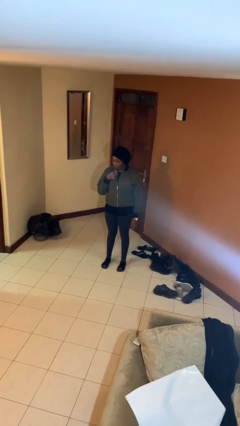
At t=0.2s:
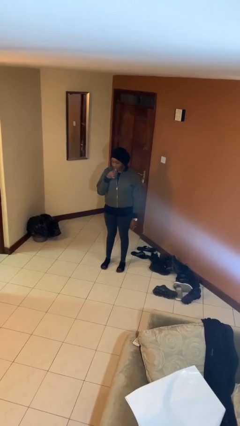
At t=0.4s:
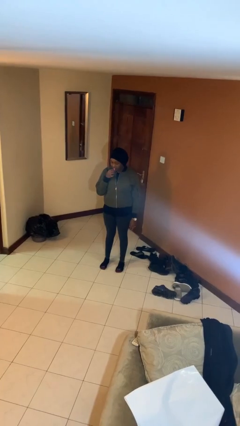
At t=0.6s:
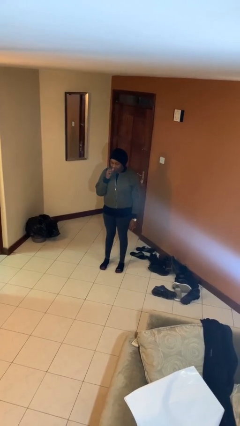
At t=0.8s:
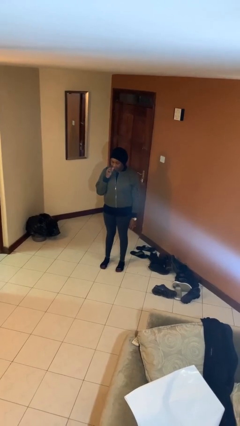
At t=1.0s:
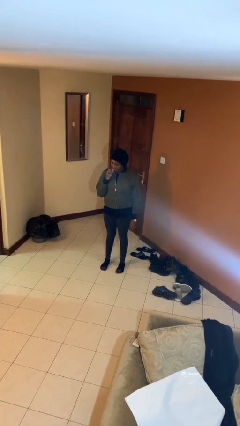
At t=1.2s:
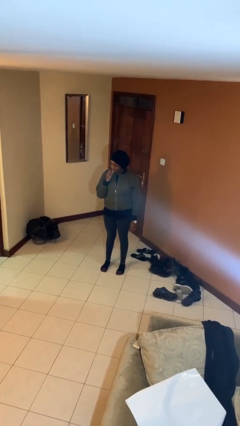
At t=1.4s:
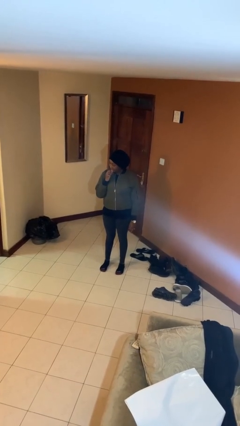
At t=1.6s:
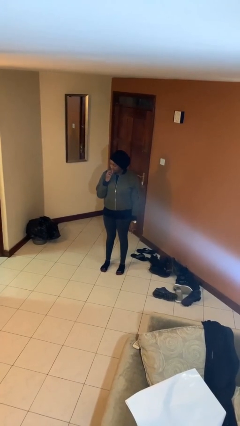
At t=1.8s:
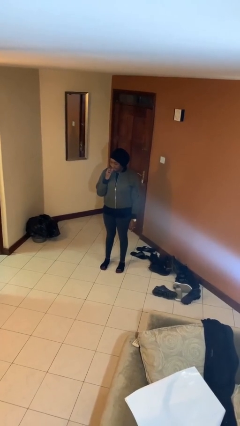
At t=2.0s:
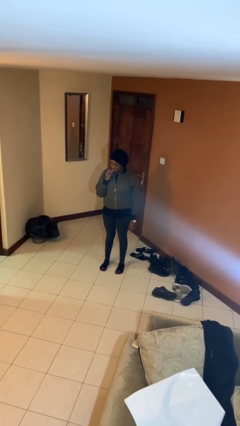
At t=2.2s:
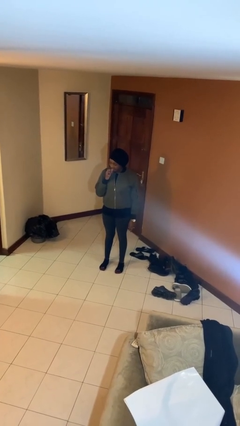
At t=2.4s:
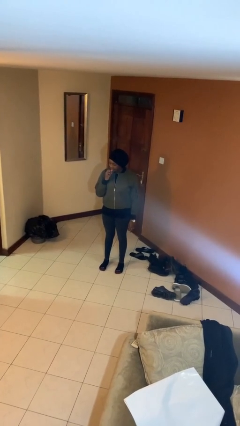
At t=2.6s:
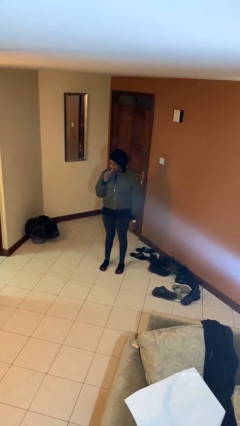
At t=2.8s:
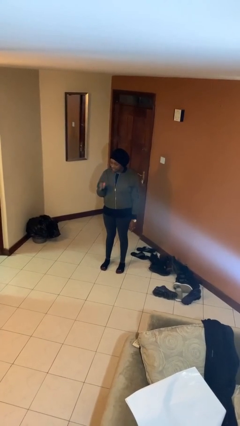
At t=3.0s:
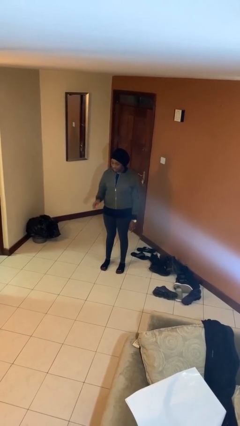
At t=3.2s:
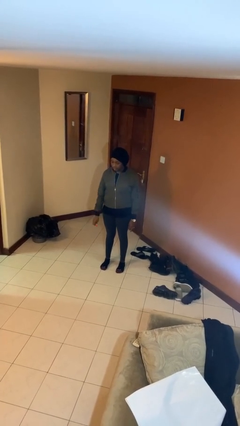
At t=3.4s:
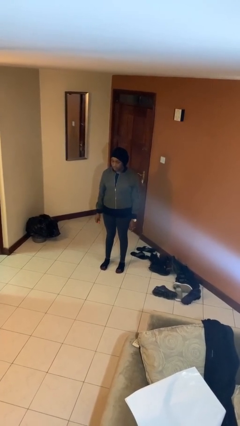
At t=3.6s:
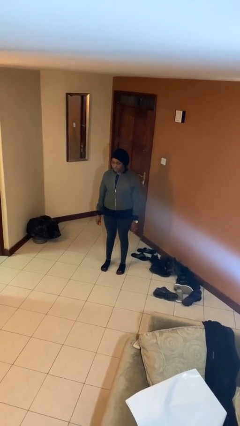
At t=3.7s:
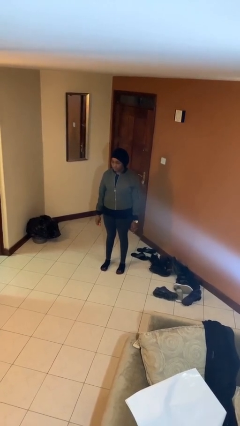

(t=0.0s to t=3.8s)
person applies lip makeup

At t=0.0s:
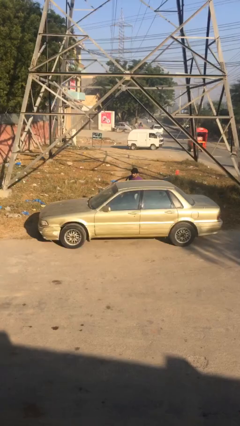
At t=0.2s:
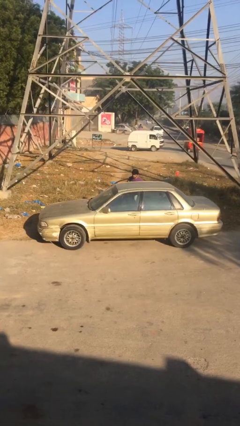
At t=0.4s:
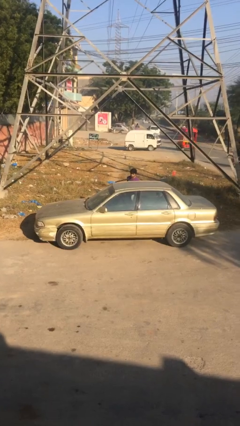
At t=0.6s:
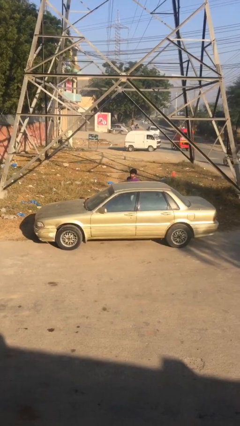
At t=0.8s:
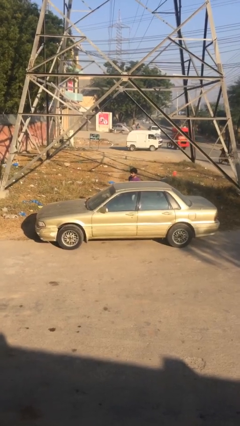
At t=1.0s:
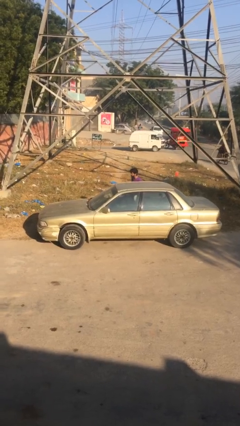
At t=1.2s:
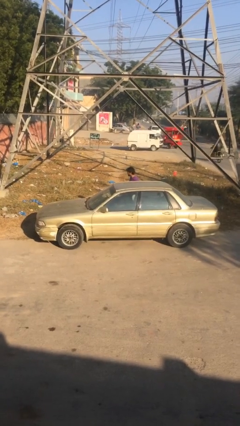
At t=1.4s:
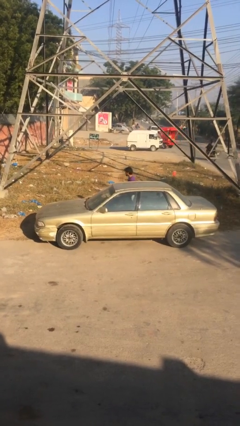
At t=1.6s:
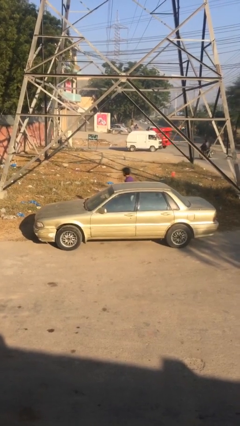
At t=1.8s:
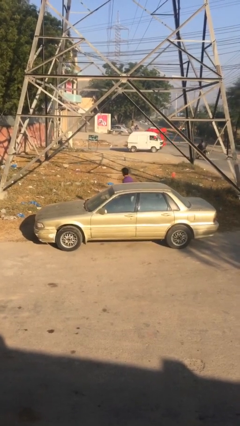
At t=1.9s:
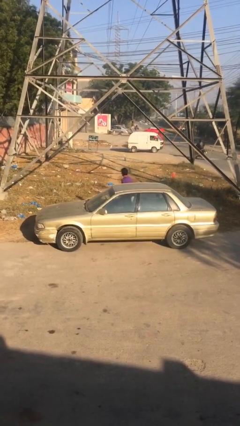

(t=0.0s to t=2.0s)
person closes car door

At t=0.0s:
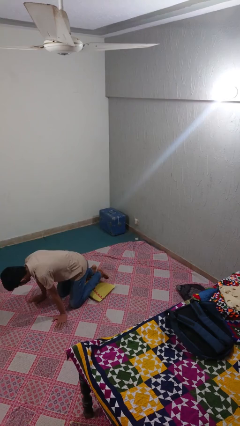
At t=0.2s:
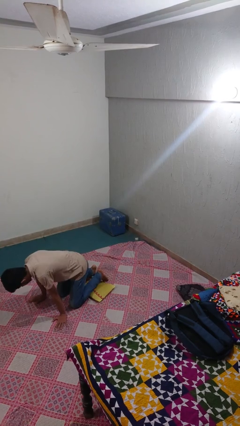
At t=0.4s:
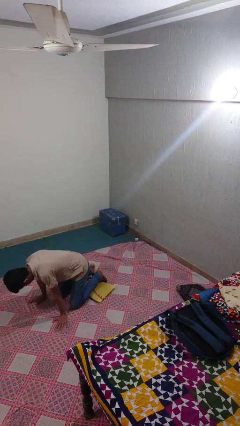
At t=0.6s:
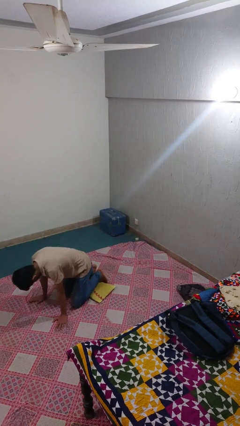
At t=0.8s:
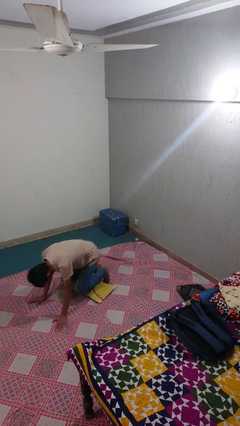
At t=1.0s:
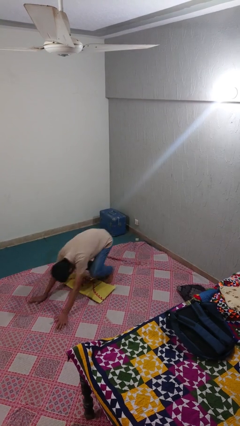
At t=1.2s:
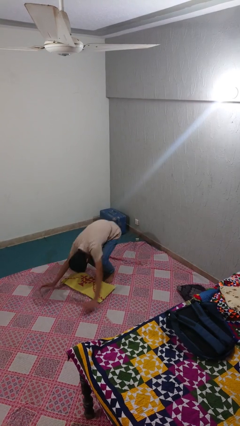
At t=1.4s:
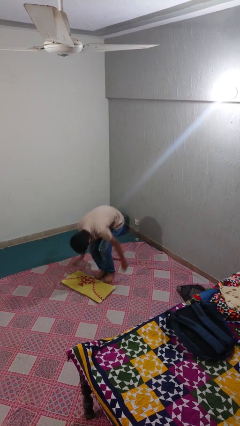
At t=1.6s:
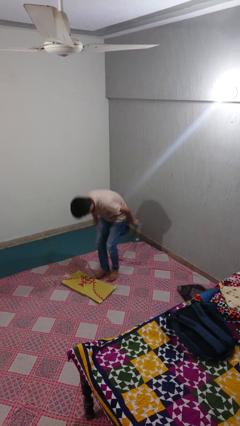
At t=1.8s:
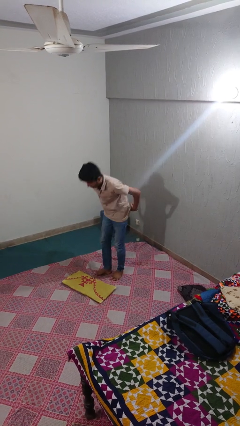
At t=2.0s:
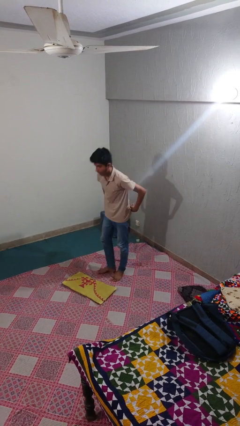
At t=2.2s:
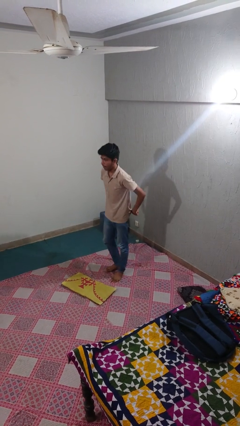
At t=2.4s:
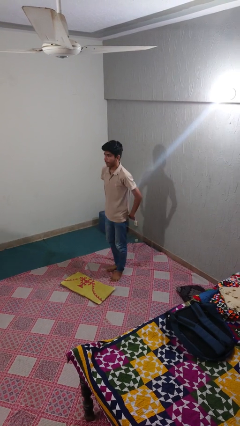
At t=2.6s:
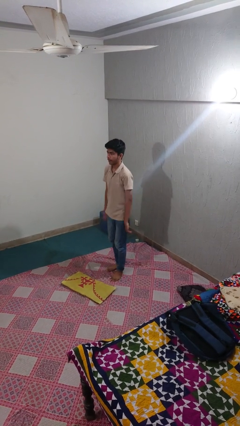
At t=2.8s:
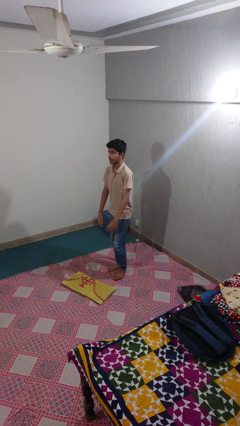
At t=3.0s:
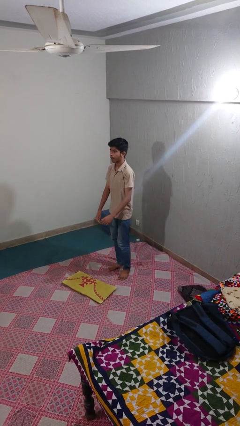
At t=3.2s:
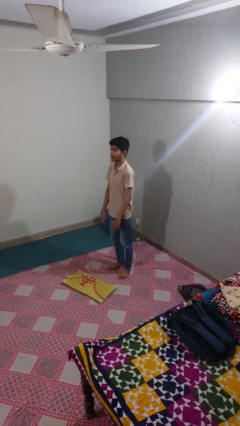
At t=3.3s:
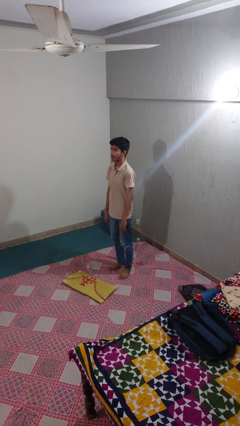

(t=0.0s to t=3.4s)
person stands up from floor

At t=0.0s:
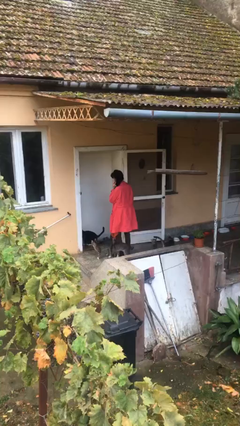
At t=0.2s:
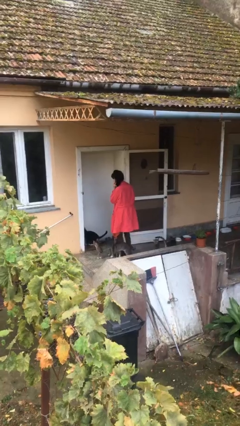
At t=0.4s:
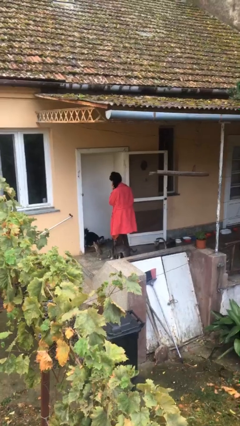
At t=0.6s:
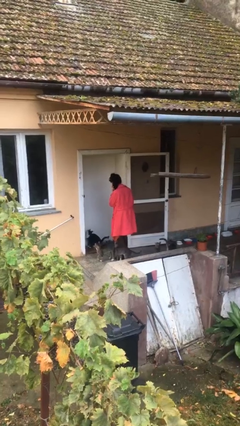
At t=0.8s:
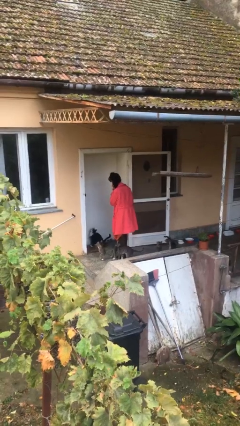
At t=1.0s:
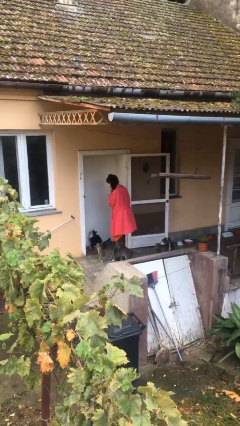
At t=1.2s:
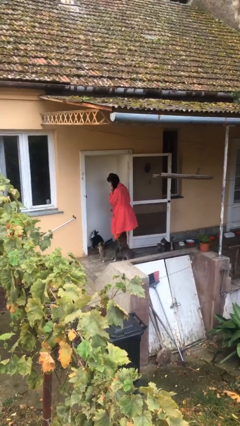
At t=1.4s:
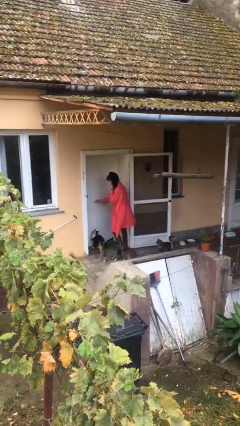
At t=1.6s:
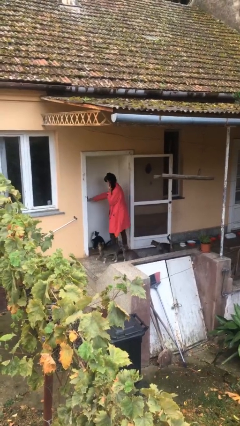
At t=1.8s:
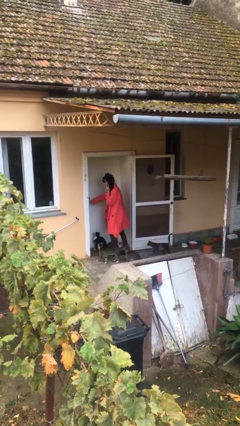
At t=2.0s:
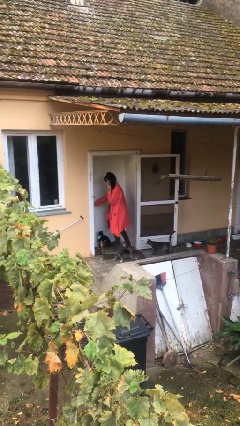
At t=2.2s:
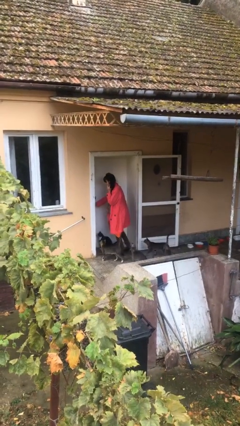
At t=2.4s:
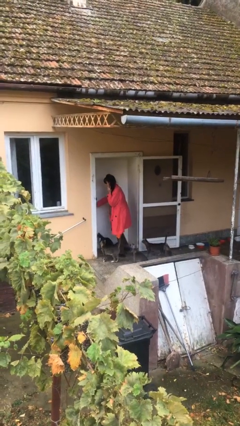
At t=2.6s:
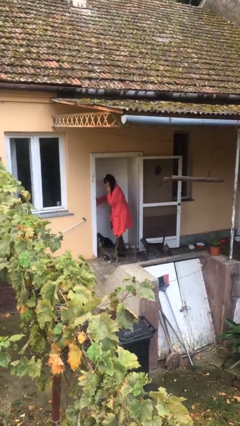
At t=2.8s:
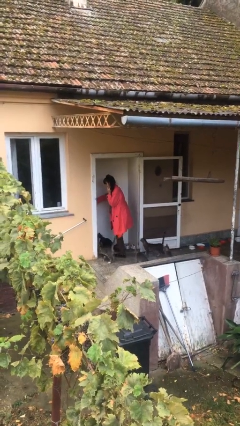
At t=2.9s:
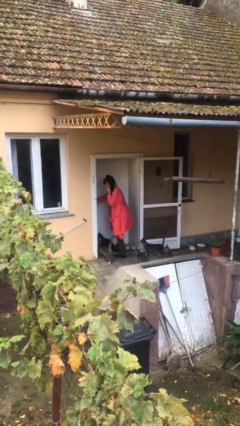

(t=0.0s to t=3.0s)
person opens facility door

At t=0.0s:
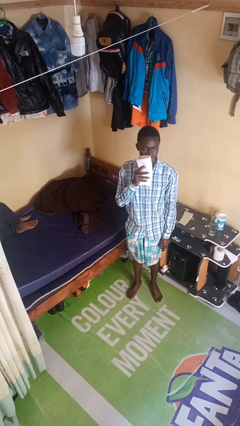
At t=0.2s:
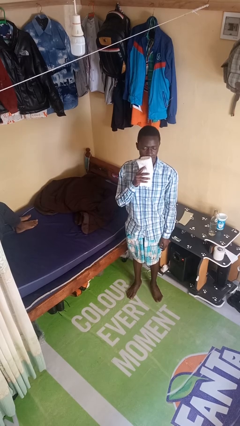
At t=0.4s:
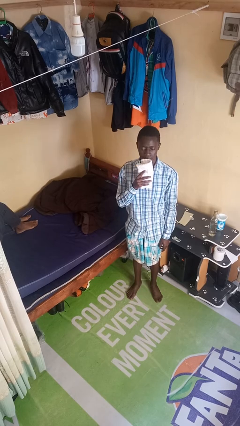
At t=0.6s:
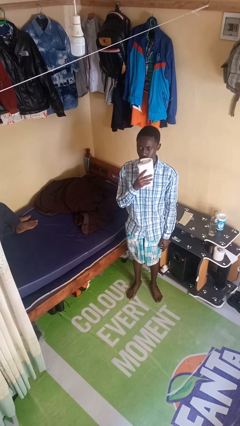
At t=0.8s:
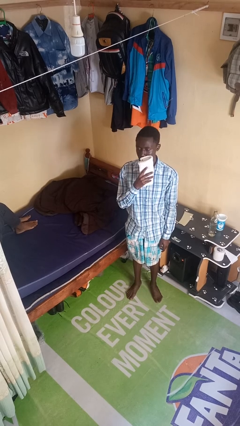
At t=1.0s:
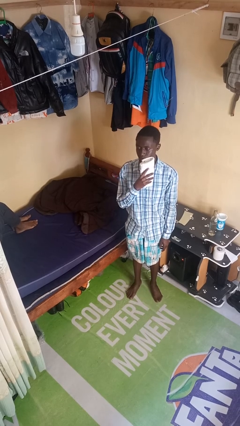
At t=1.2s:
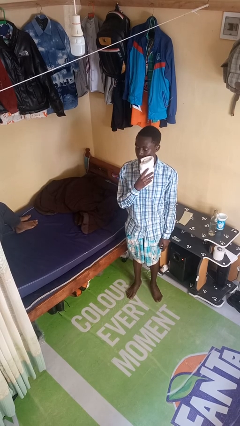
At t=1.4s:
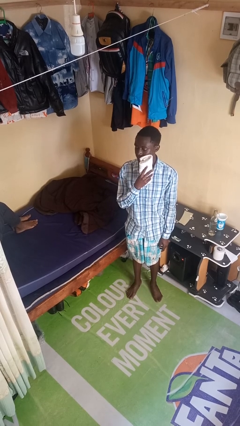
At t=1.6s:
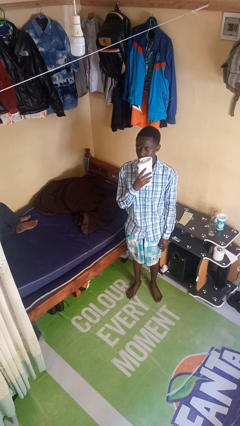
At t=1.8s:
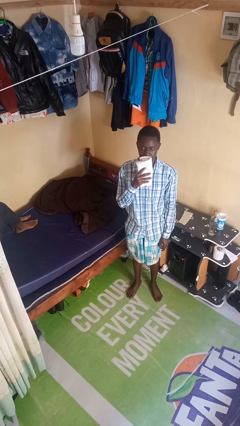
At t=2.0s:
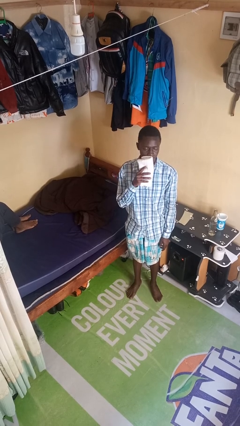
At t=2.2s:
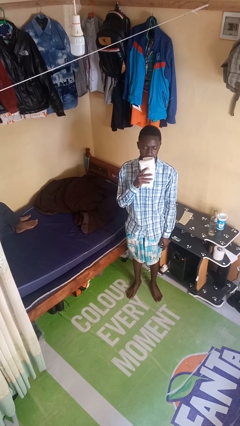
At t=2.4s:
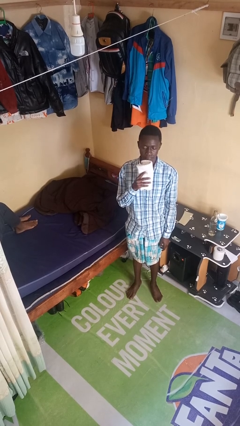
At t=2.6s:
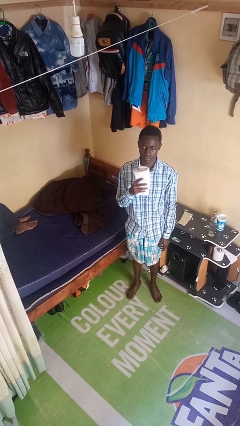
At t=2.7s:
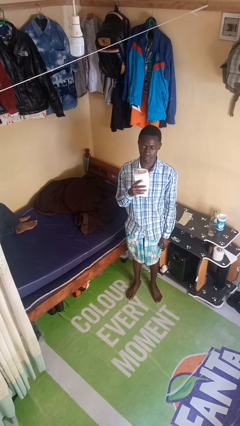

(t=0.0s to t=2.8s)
person wipes mouth with napkin

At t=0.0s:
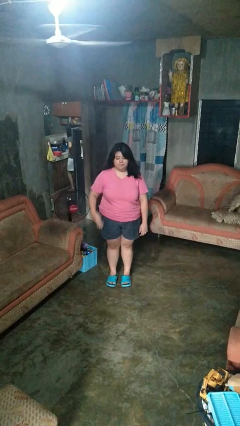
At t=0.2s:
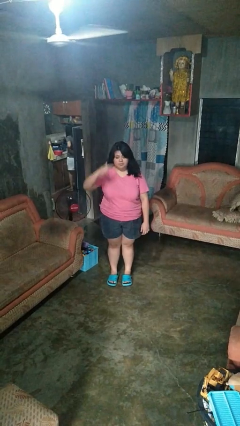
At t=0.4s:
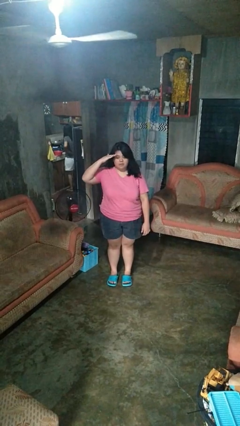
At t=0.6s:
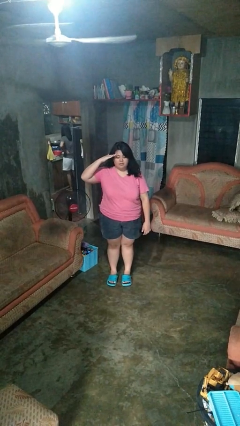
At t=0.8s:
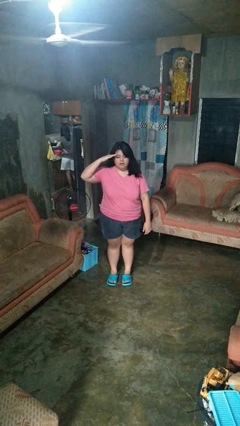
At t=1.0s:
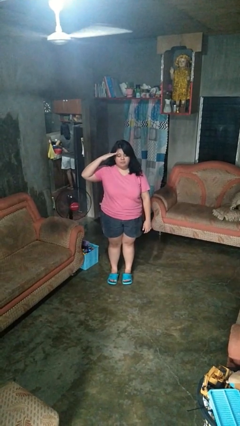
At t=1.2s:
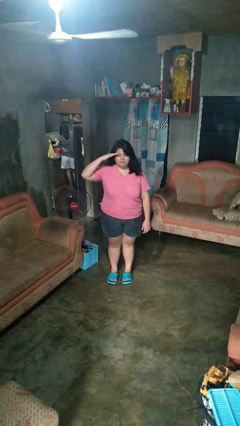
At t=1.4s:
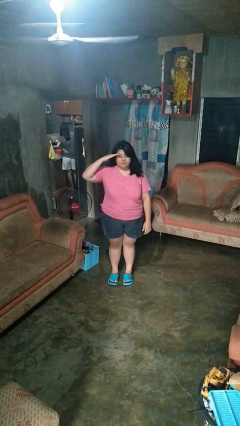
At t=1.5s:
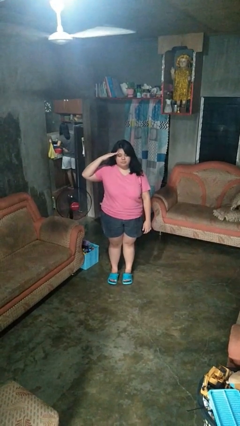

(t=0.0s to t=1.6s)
person salutes

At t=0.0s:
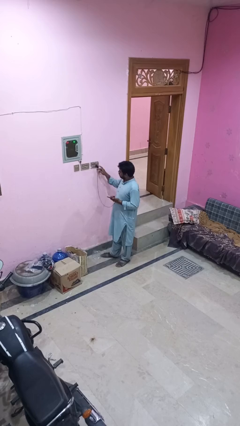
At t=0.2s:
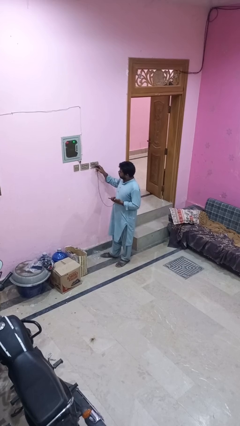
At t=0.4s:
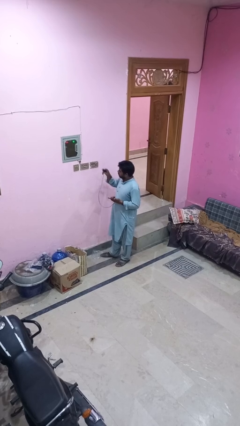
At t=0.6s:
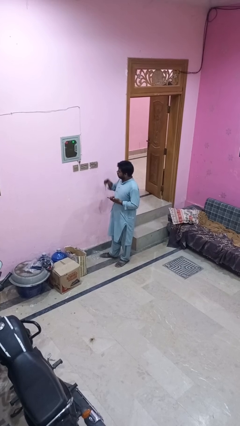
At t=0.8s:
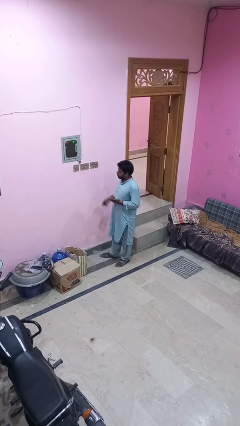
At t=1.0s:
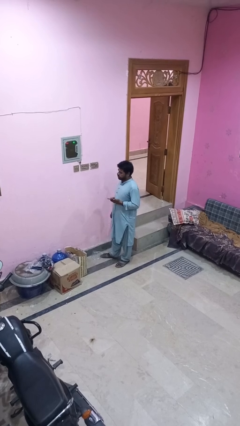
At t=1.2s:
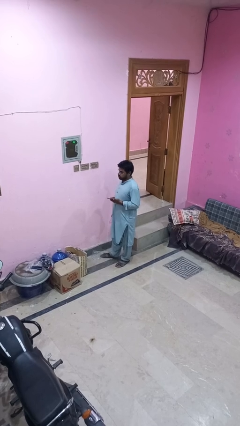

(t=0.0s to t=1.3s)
person unplugs from electrical socket
